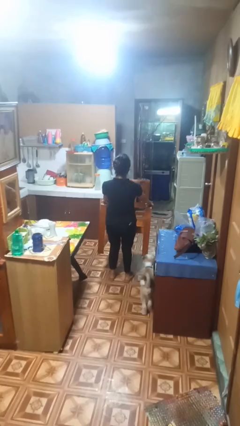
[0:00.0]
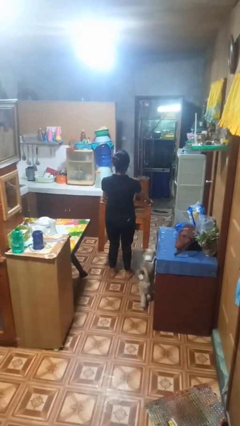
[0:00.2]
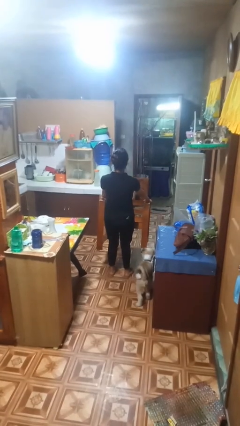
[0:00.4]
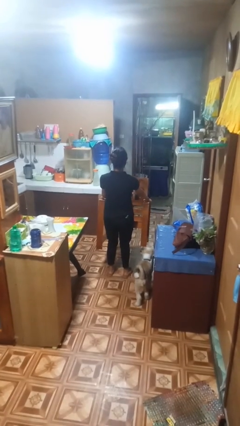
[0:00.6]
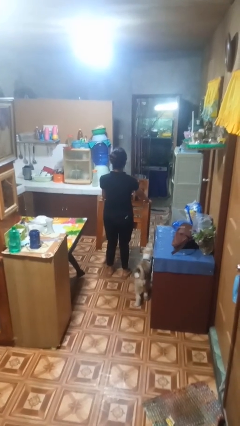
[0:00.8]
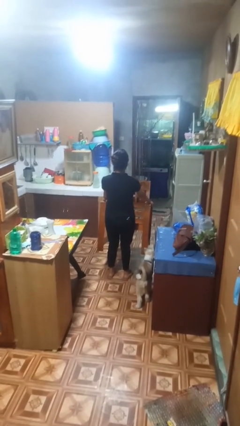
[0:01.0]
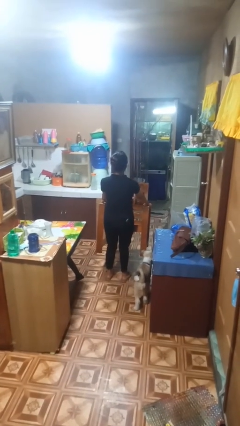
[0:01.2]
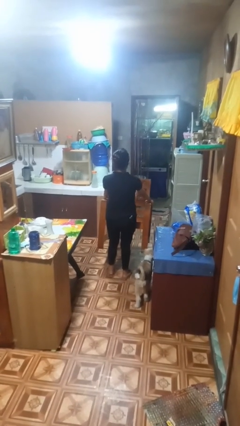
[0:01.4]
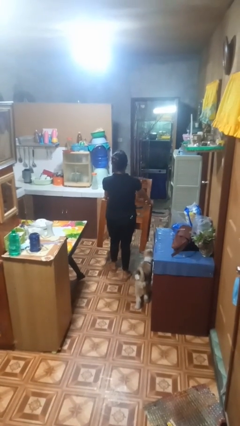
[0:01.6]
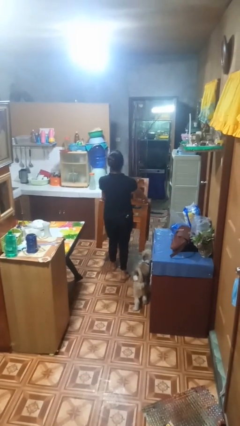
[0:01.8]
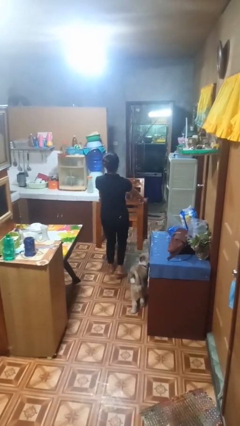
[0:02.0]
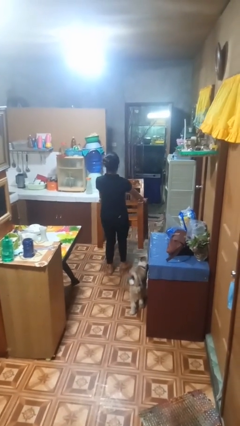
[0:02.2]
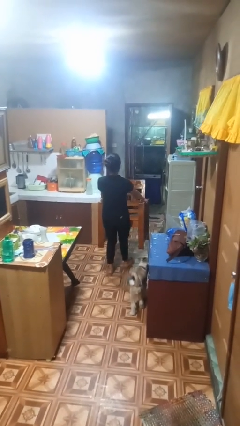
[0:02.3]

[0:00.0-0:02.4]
person carries furniture

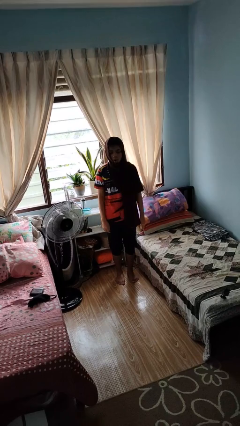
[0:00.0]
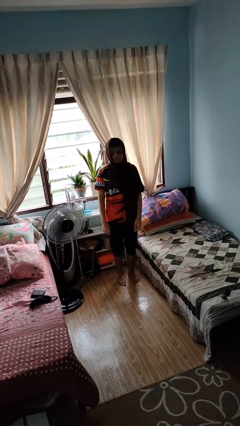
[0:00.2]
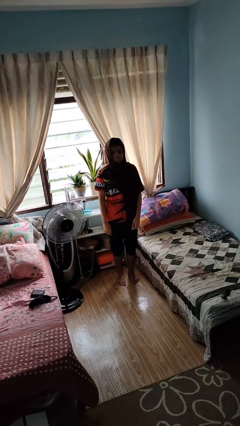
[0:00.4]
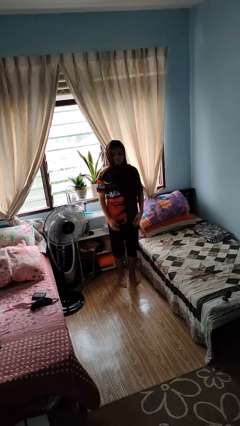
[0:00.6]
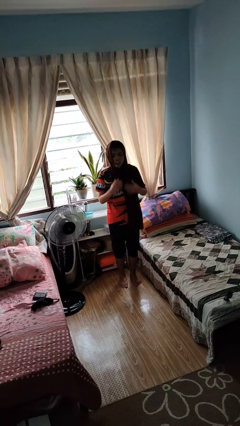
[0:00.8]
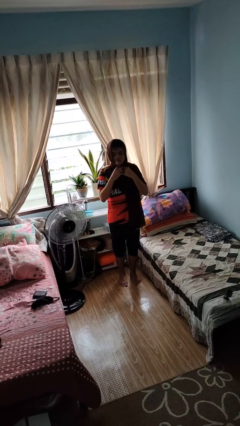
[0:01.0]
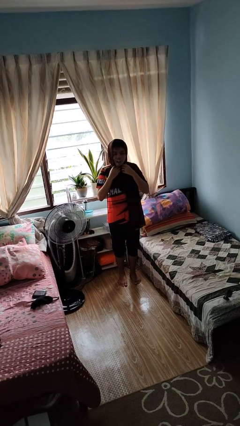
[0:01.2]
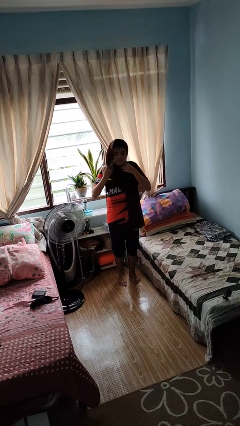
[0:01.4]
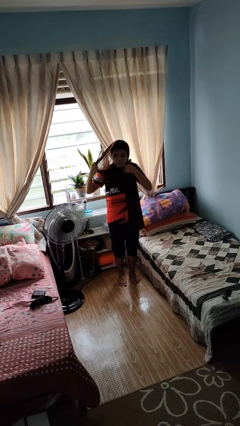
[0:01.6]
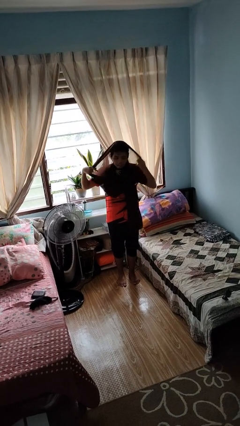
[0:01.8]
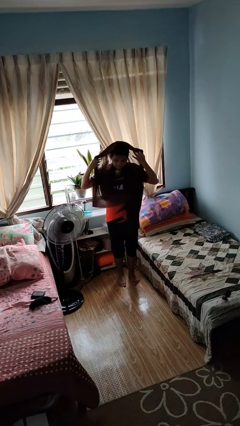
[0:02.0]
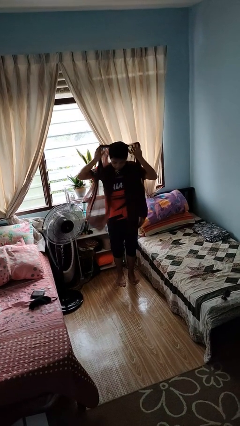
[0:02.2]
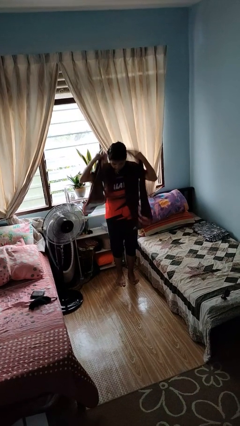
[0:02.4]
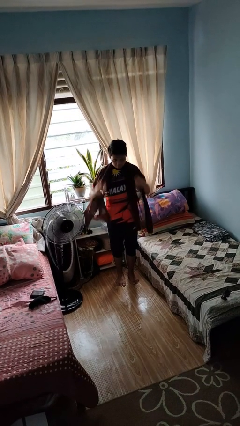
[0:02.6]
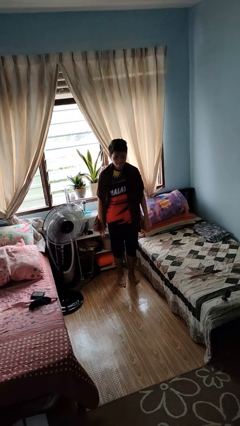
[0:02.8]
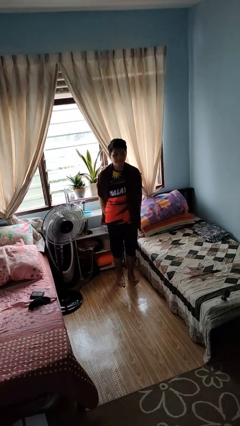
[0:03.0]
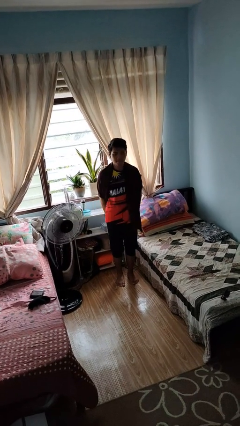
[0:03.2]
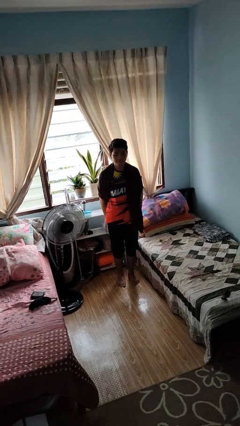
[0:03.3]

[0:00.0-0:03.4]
person takes off scarf

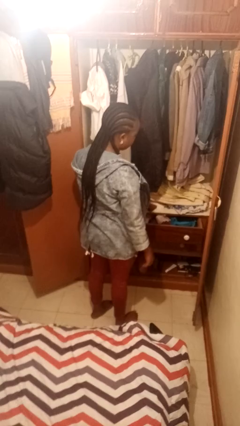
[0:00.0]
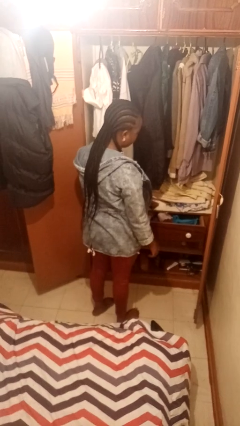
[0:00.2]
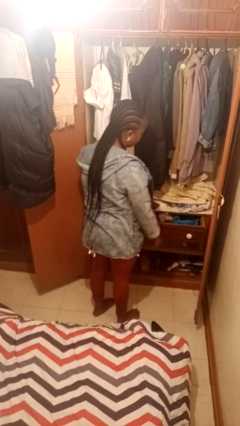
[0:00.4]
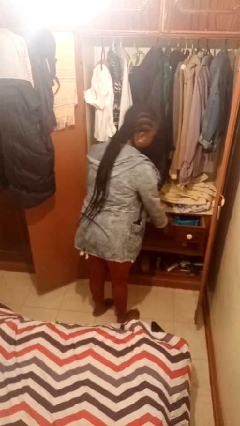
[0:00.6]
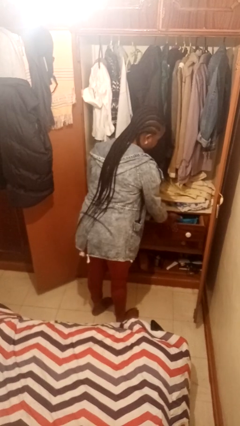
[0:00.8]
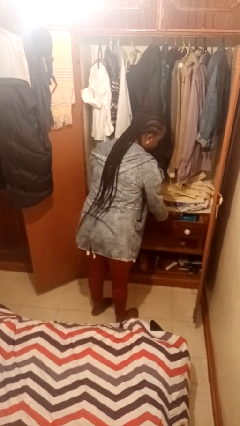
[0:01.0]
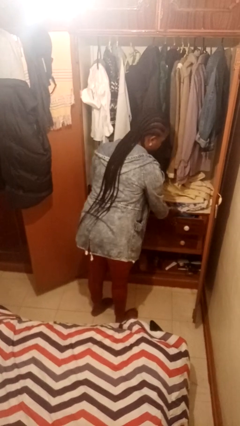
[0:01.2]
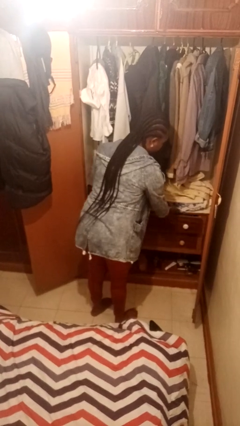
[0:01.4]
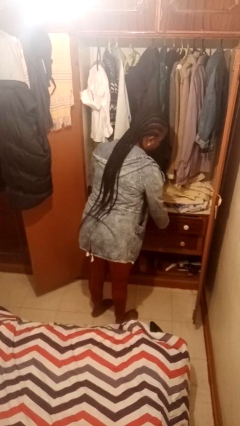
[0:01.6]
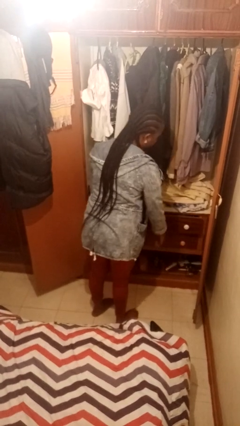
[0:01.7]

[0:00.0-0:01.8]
person closes dresser drawer

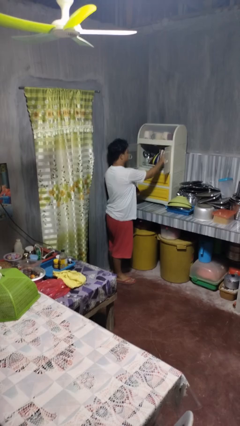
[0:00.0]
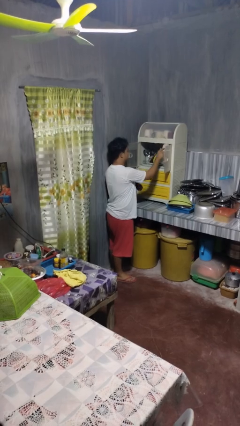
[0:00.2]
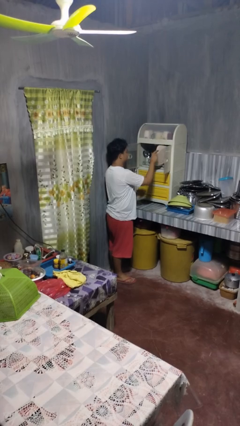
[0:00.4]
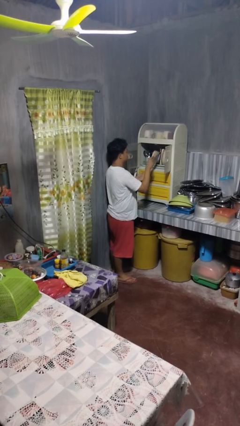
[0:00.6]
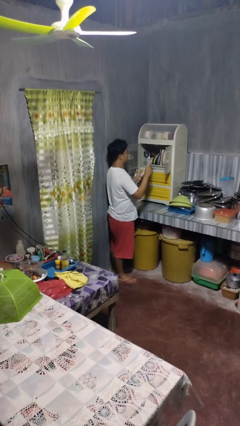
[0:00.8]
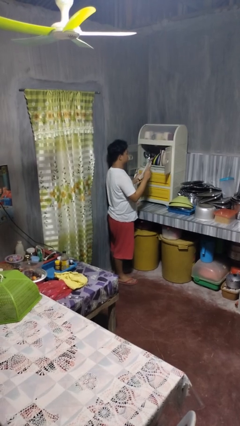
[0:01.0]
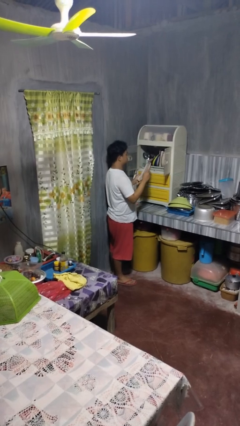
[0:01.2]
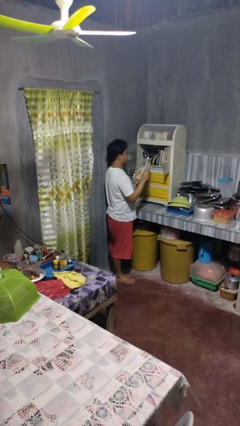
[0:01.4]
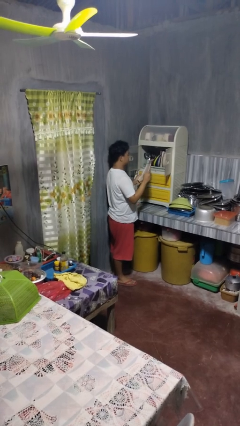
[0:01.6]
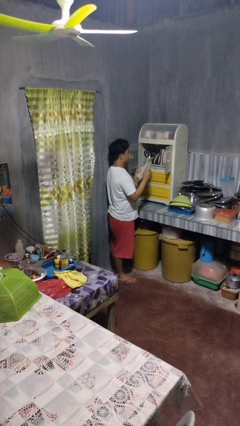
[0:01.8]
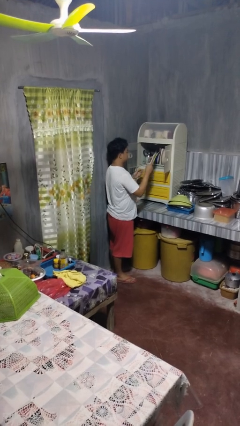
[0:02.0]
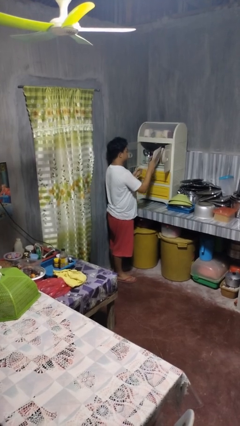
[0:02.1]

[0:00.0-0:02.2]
person picks up object from cabinet

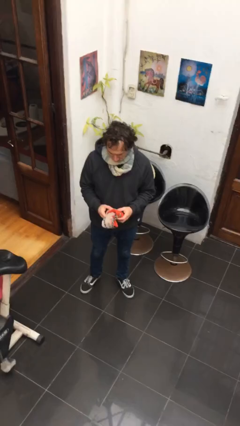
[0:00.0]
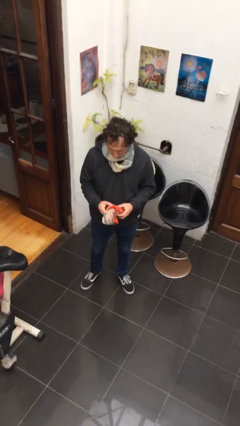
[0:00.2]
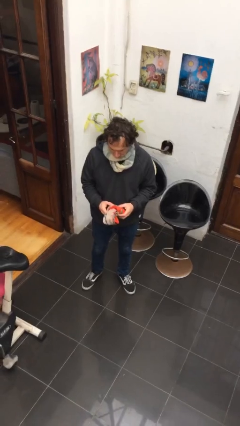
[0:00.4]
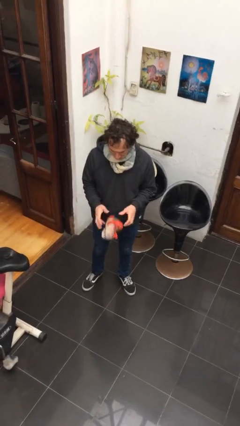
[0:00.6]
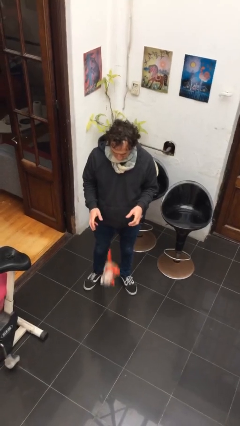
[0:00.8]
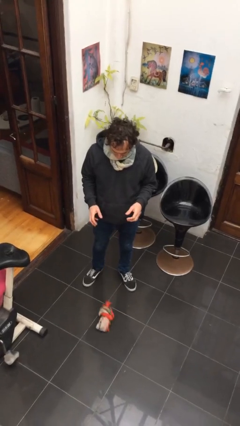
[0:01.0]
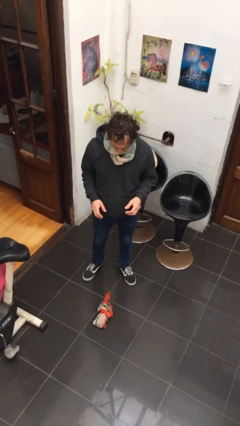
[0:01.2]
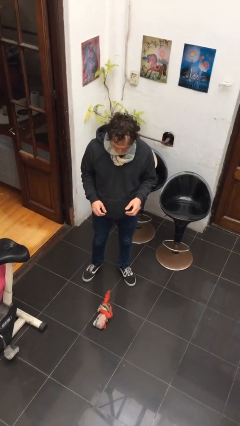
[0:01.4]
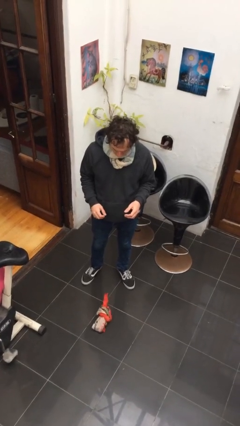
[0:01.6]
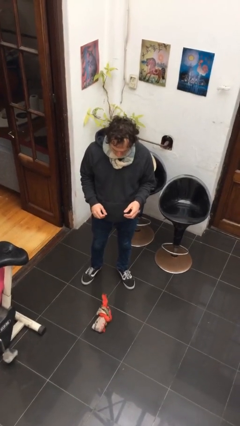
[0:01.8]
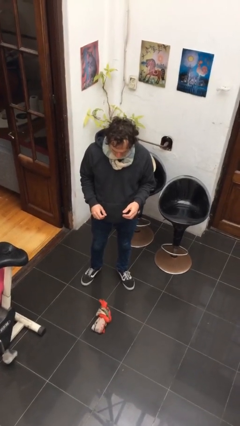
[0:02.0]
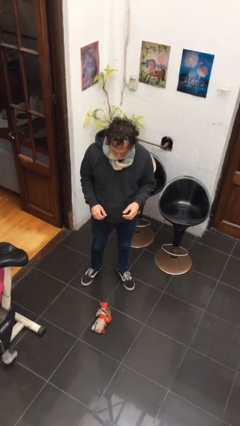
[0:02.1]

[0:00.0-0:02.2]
person drops object

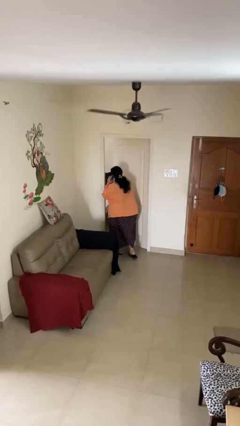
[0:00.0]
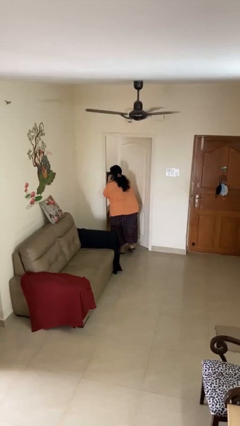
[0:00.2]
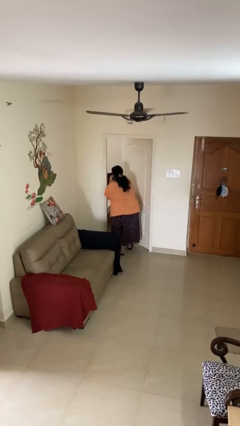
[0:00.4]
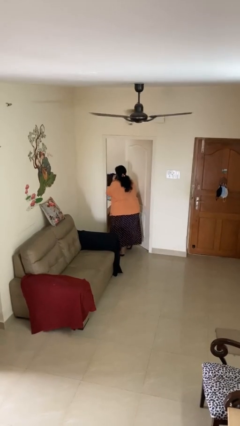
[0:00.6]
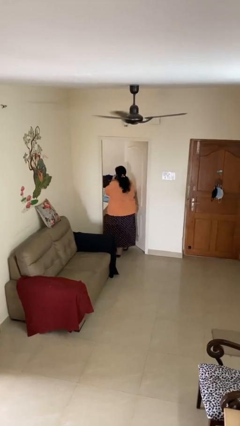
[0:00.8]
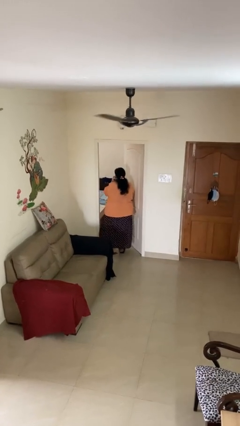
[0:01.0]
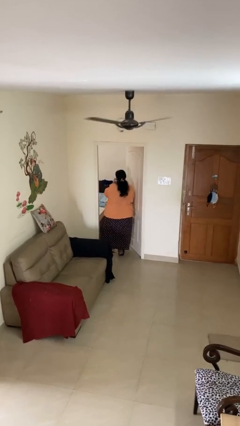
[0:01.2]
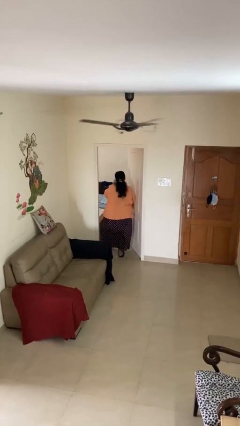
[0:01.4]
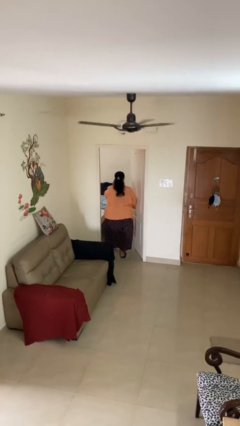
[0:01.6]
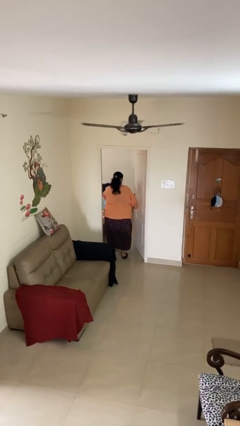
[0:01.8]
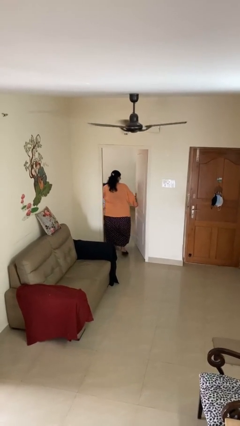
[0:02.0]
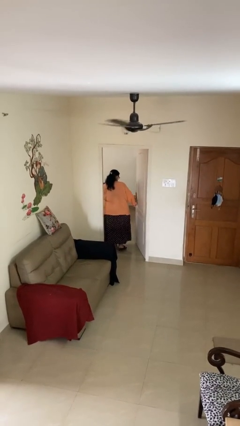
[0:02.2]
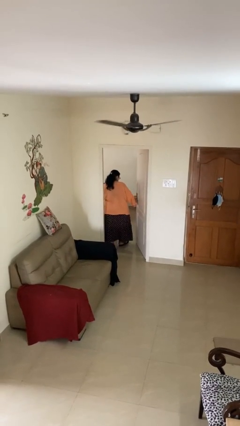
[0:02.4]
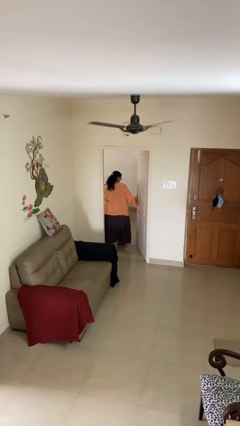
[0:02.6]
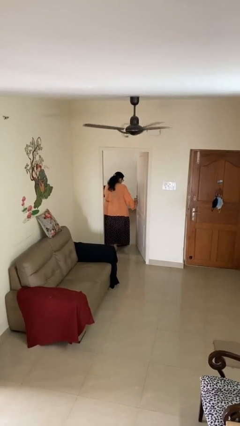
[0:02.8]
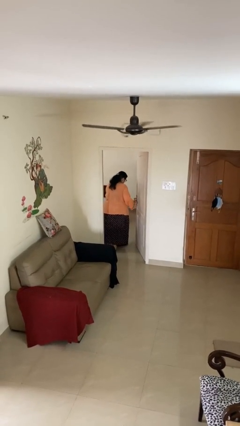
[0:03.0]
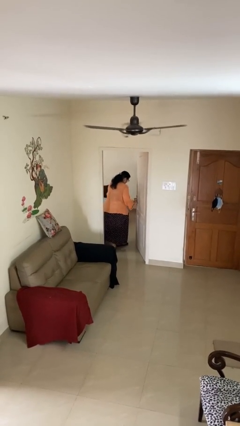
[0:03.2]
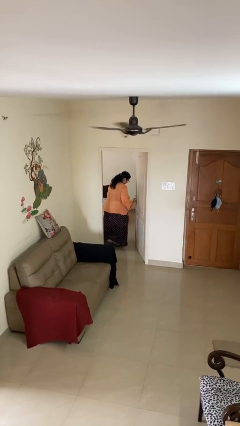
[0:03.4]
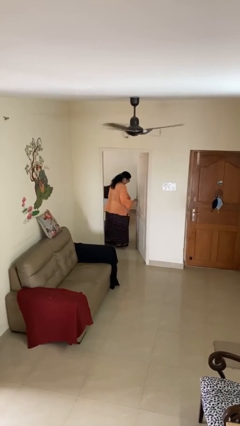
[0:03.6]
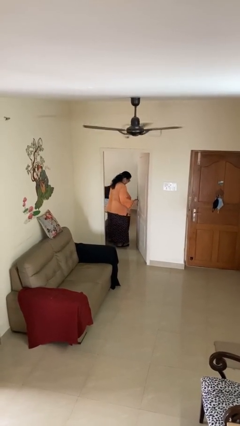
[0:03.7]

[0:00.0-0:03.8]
person exits scene through structure

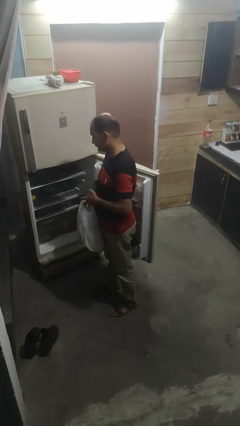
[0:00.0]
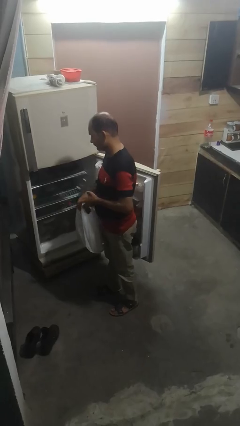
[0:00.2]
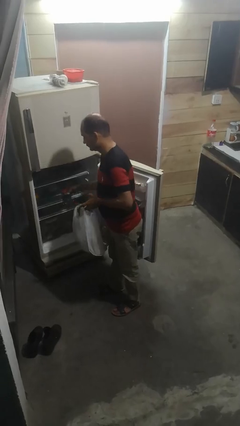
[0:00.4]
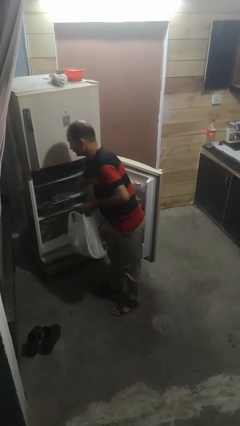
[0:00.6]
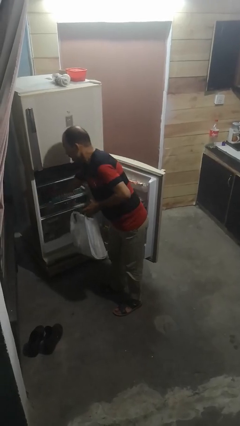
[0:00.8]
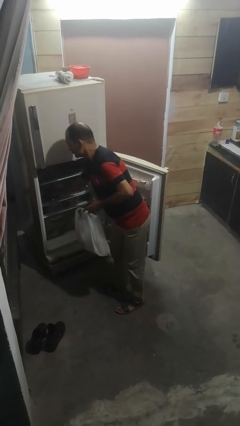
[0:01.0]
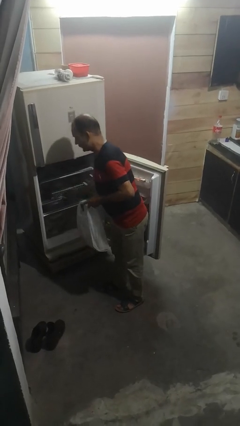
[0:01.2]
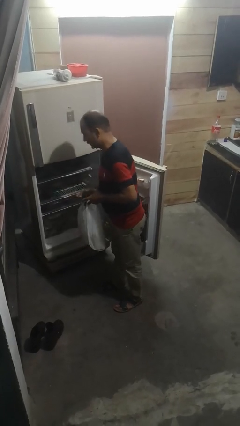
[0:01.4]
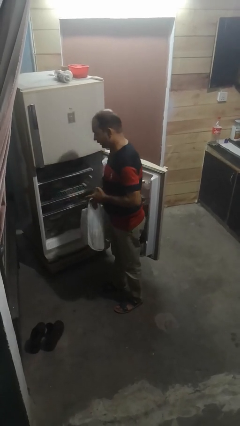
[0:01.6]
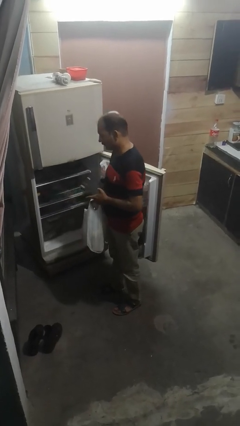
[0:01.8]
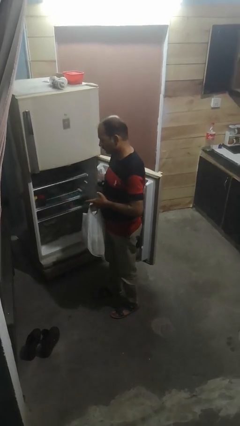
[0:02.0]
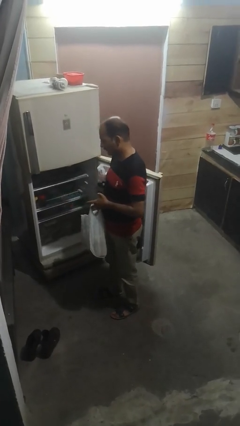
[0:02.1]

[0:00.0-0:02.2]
person loads groceries into refrigerator
